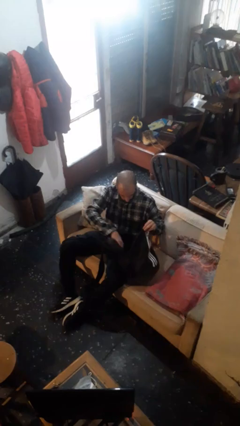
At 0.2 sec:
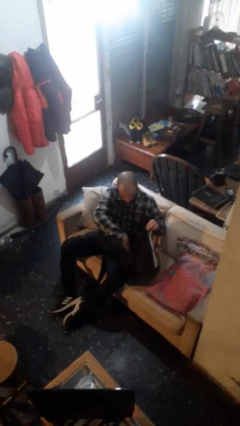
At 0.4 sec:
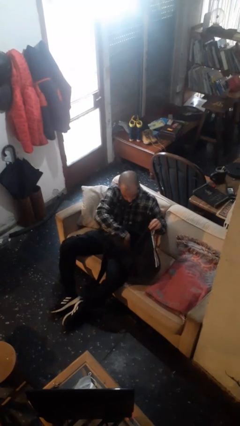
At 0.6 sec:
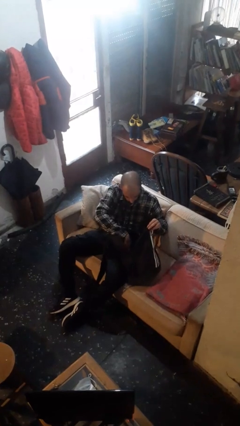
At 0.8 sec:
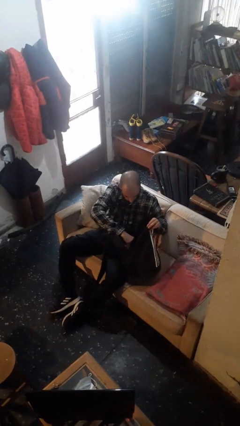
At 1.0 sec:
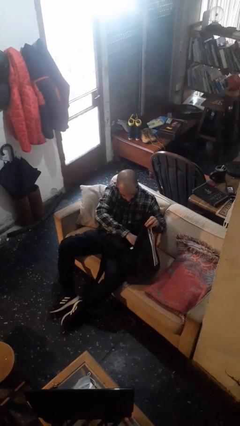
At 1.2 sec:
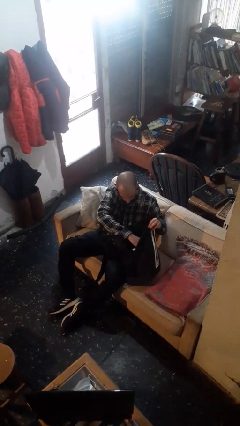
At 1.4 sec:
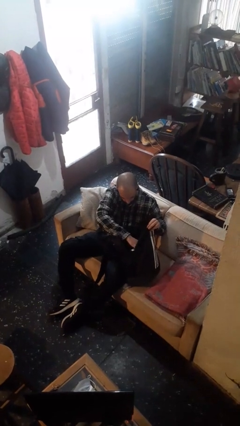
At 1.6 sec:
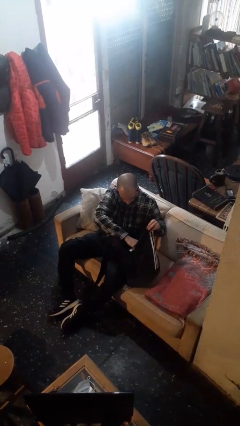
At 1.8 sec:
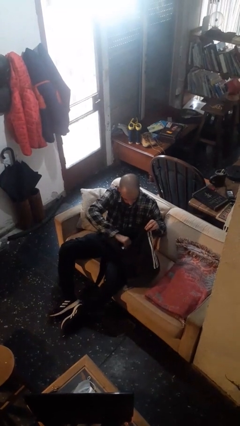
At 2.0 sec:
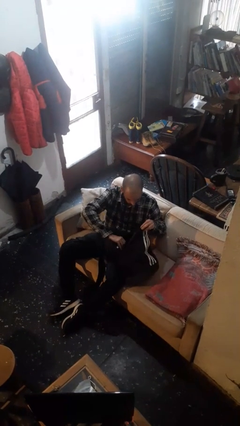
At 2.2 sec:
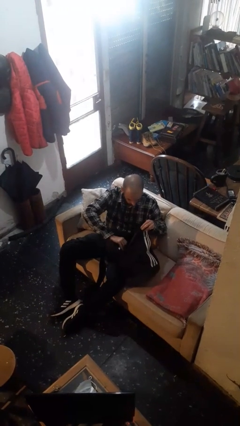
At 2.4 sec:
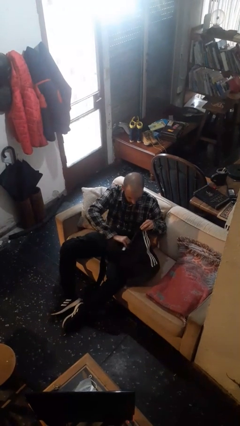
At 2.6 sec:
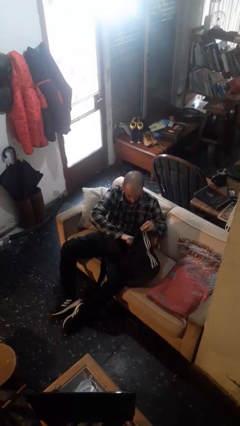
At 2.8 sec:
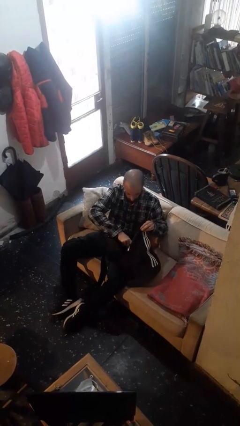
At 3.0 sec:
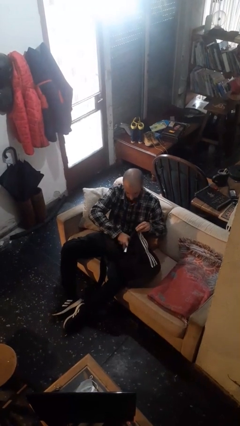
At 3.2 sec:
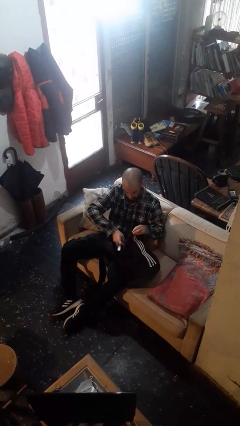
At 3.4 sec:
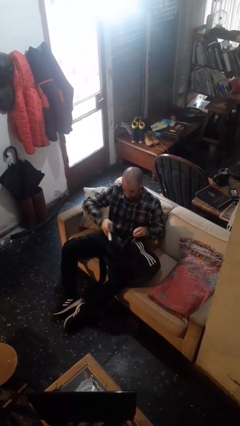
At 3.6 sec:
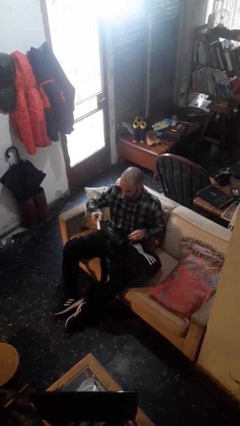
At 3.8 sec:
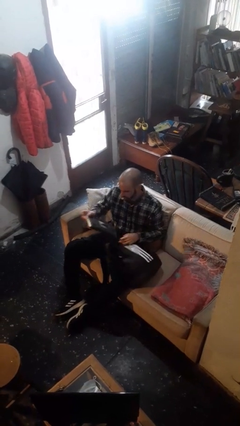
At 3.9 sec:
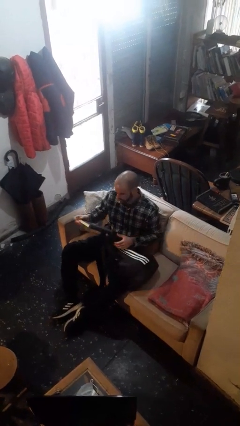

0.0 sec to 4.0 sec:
person searches in backpack

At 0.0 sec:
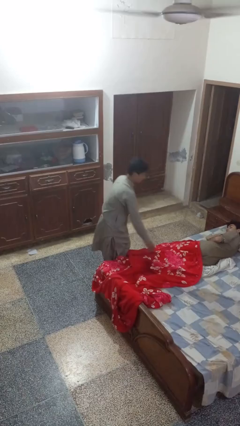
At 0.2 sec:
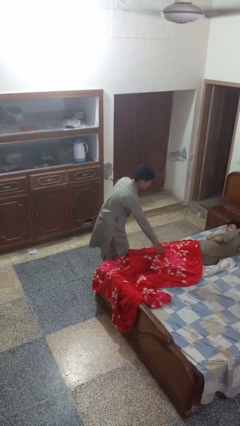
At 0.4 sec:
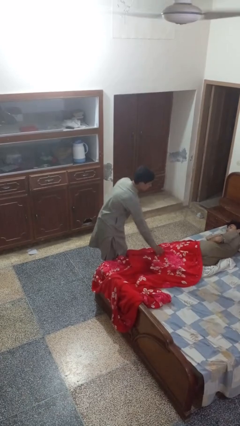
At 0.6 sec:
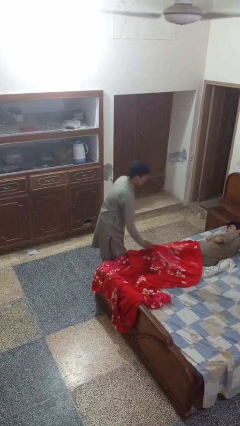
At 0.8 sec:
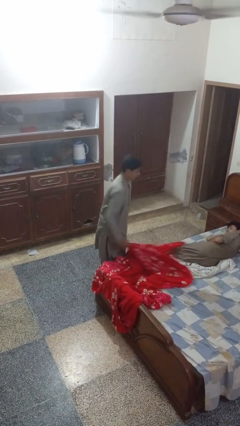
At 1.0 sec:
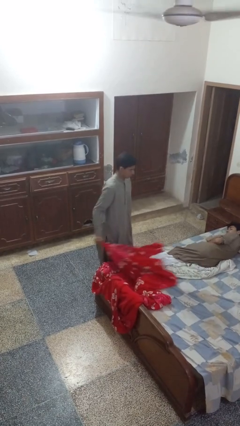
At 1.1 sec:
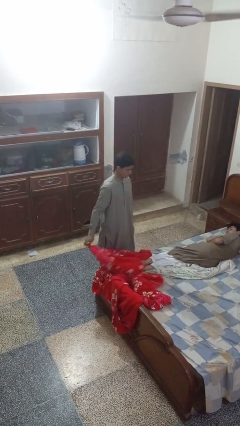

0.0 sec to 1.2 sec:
person uncovers friend with blanket

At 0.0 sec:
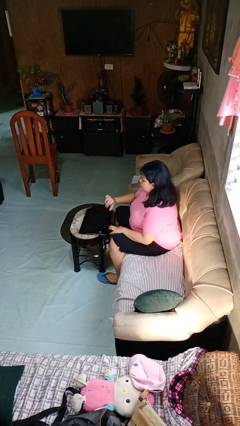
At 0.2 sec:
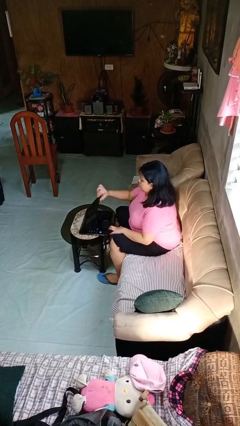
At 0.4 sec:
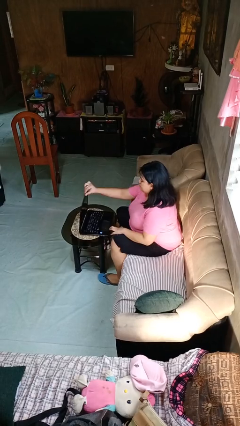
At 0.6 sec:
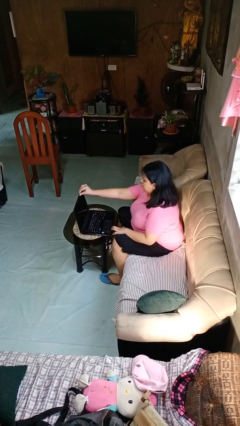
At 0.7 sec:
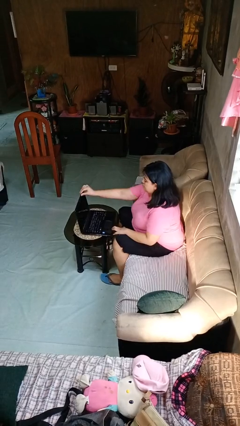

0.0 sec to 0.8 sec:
person opens laptop

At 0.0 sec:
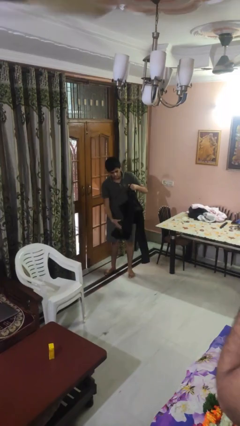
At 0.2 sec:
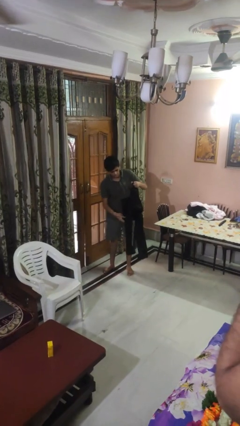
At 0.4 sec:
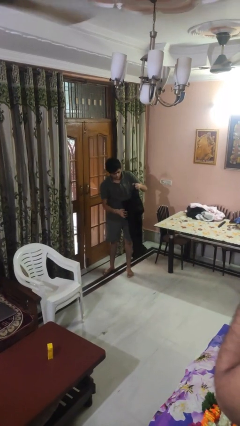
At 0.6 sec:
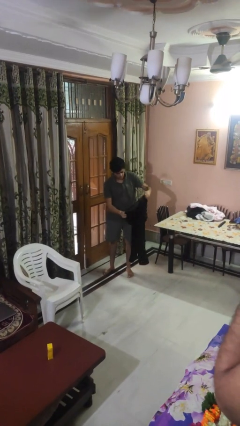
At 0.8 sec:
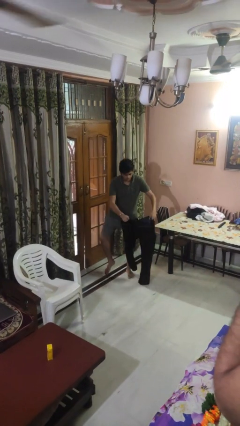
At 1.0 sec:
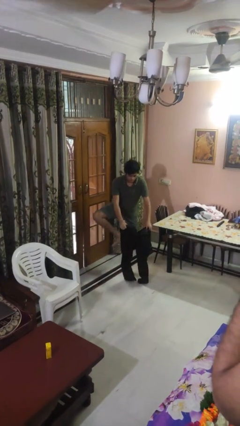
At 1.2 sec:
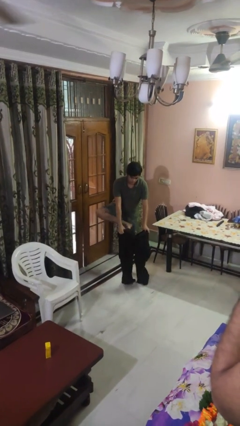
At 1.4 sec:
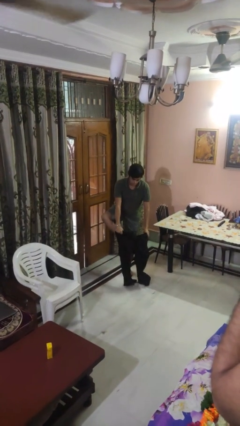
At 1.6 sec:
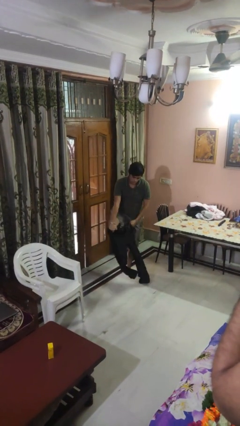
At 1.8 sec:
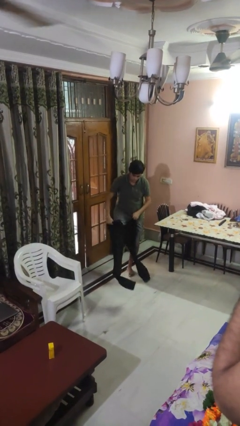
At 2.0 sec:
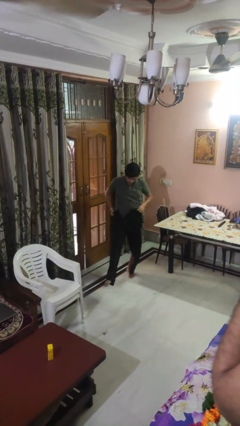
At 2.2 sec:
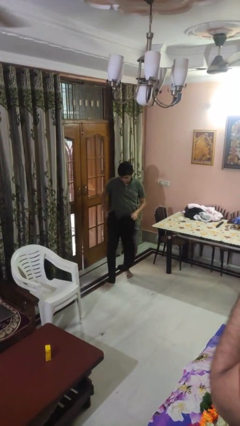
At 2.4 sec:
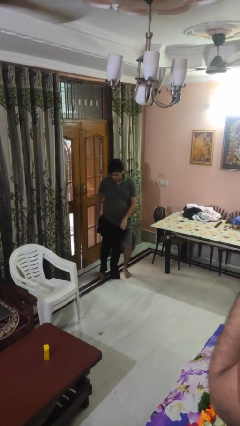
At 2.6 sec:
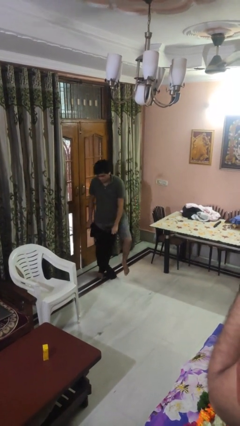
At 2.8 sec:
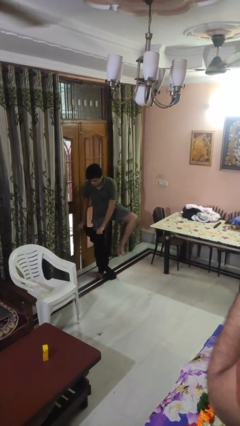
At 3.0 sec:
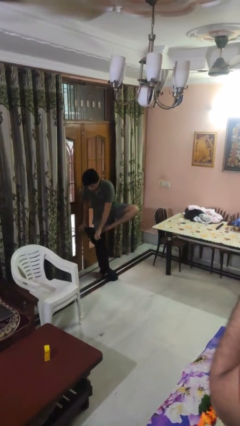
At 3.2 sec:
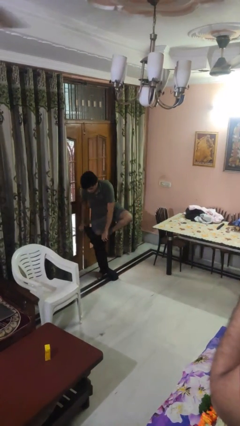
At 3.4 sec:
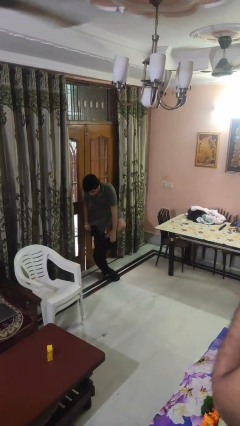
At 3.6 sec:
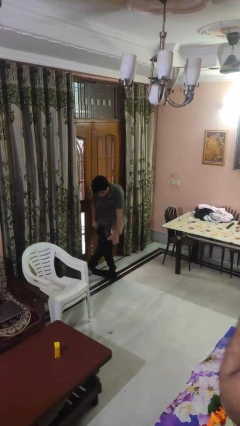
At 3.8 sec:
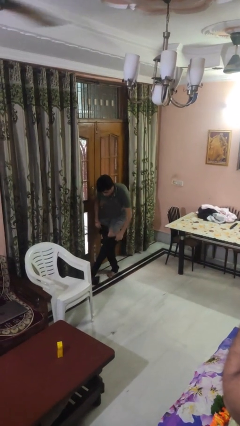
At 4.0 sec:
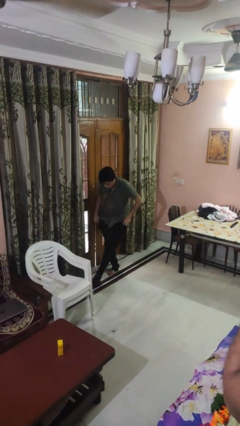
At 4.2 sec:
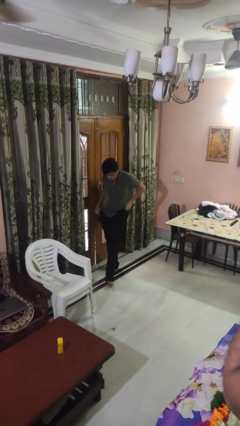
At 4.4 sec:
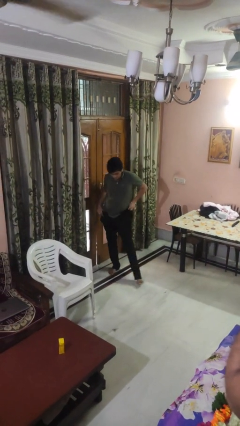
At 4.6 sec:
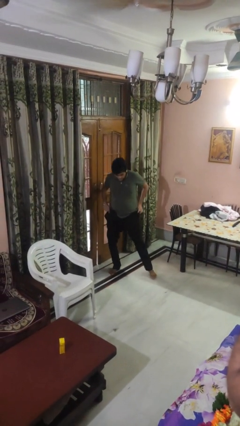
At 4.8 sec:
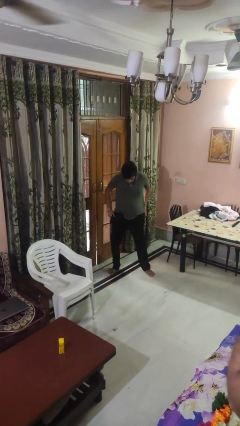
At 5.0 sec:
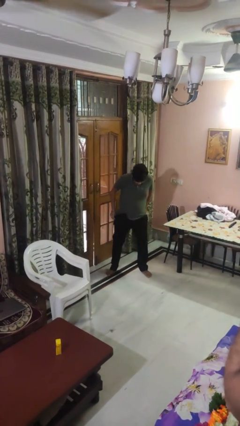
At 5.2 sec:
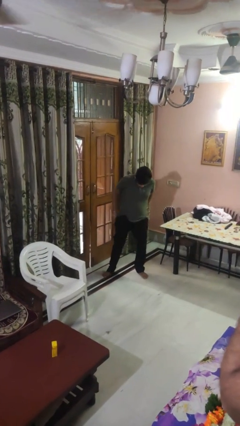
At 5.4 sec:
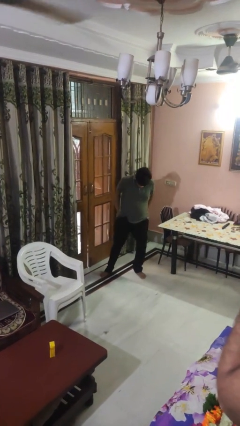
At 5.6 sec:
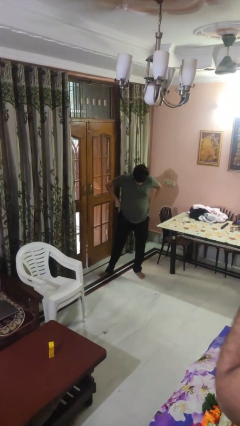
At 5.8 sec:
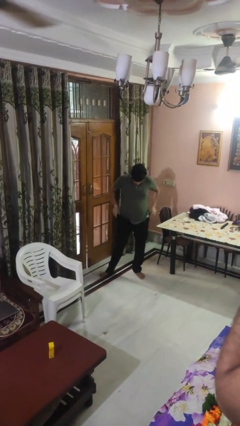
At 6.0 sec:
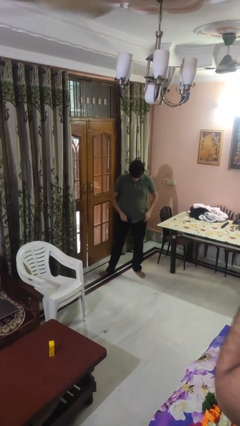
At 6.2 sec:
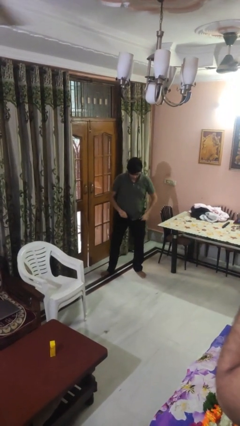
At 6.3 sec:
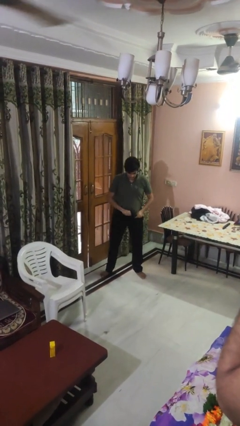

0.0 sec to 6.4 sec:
person puts on pants

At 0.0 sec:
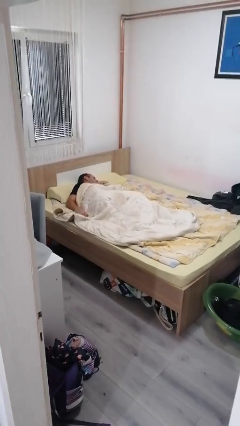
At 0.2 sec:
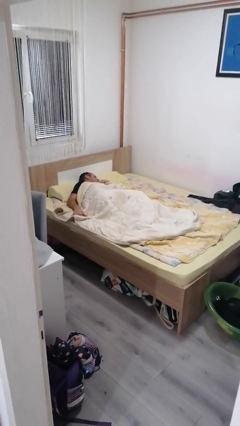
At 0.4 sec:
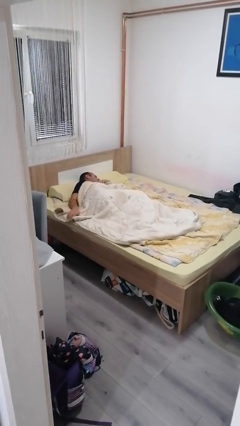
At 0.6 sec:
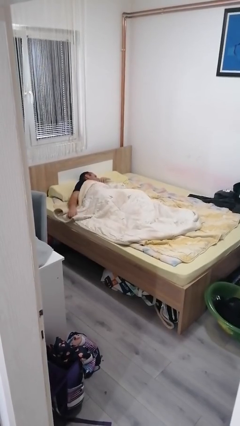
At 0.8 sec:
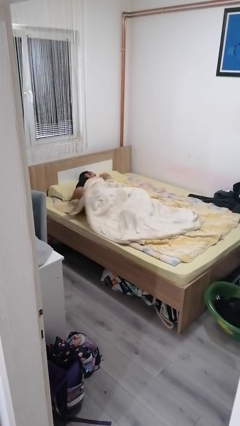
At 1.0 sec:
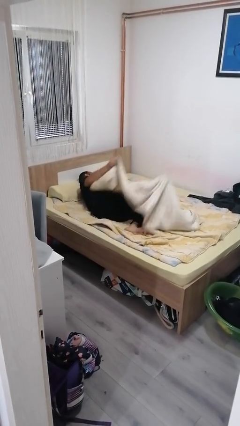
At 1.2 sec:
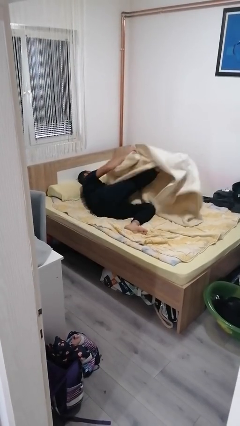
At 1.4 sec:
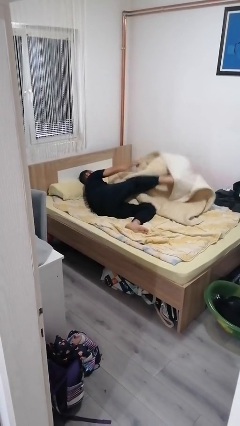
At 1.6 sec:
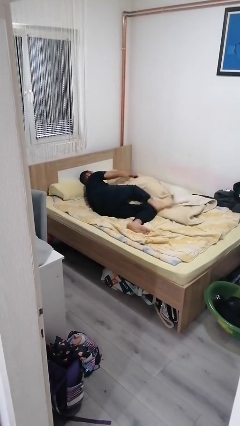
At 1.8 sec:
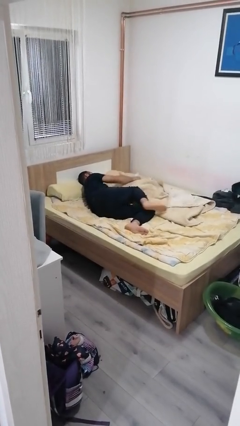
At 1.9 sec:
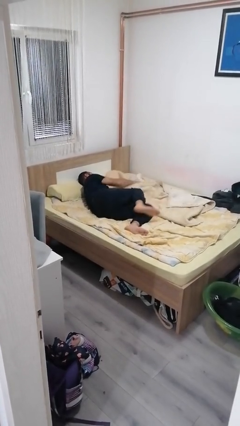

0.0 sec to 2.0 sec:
person uncovers with bedsheets

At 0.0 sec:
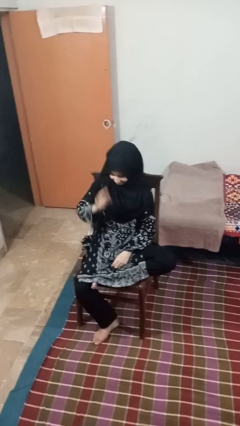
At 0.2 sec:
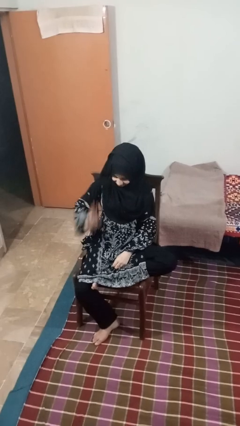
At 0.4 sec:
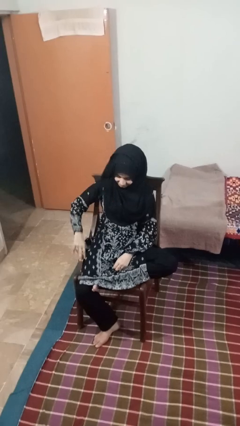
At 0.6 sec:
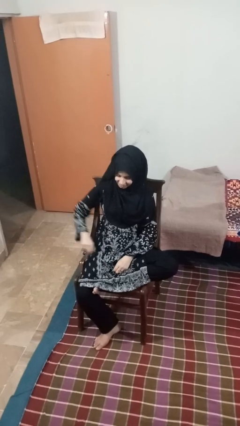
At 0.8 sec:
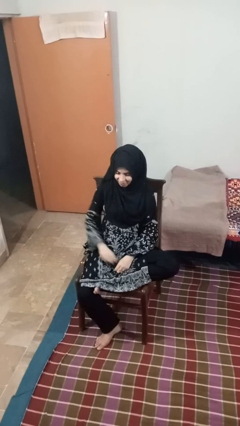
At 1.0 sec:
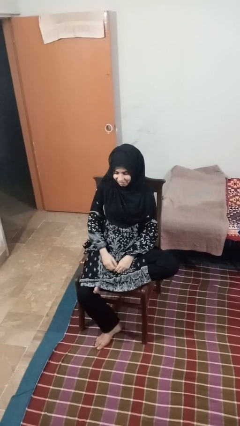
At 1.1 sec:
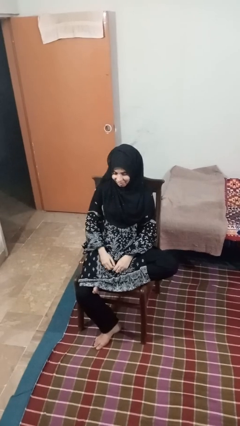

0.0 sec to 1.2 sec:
person swats bug

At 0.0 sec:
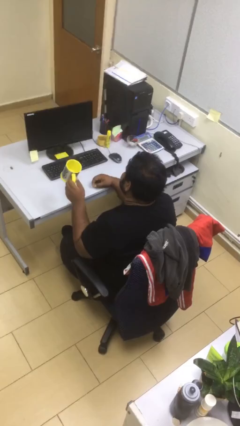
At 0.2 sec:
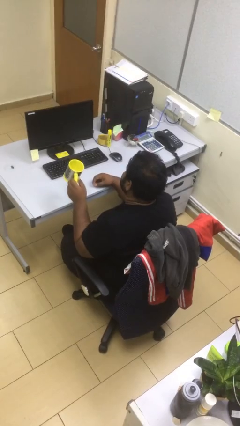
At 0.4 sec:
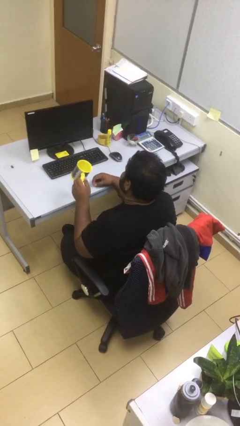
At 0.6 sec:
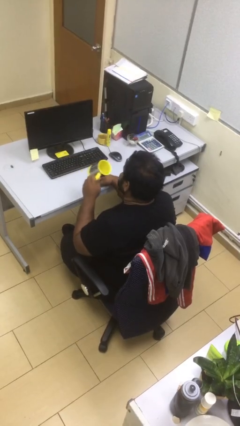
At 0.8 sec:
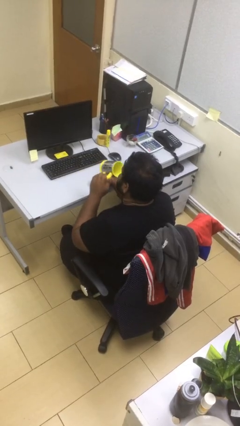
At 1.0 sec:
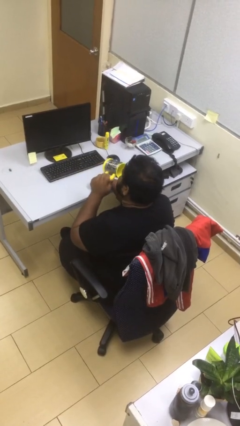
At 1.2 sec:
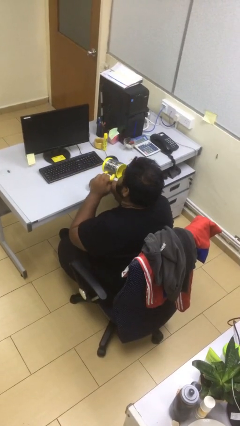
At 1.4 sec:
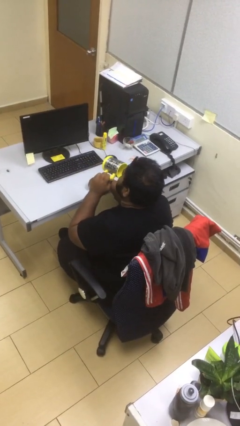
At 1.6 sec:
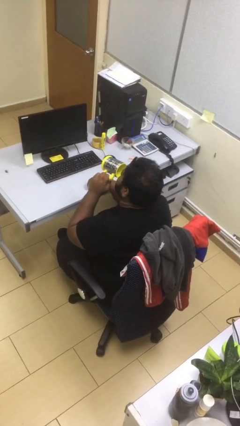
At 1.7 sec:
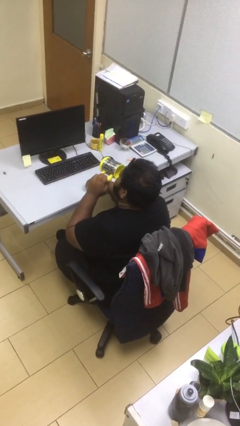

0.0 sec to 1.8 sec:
person drinks from mug
